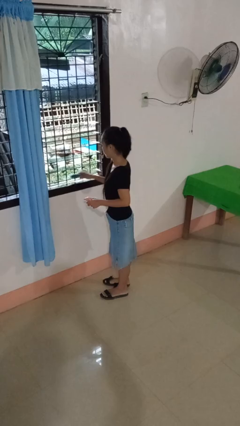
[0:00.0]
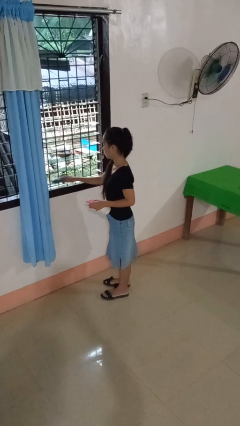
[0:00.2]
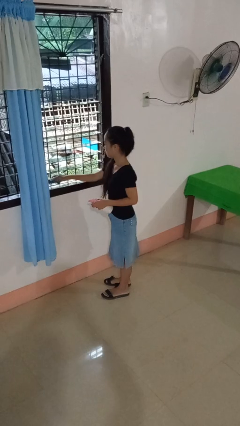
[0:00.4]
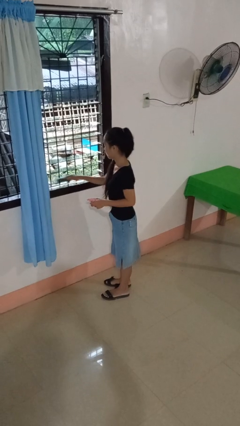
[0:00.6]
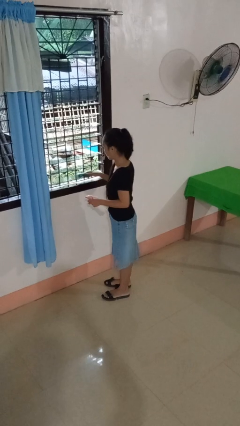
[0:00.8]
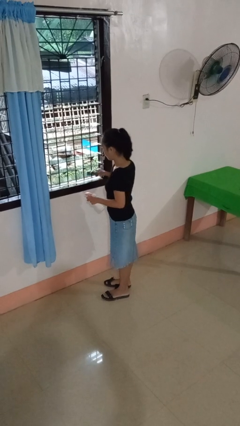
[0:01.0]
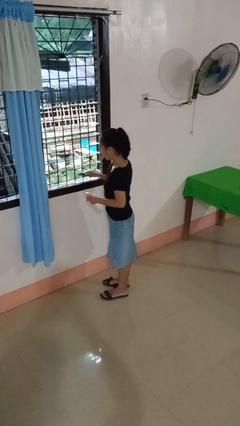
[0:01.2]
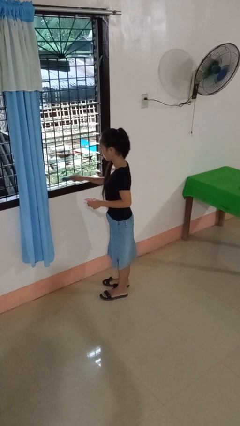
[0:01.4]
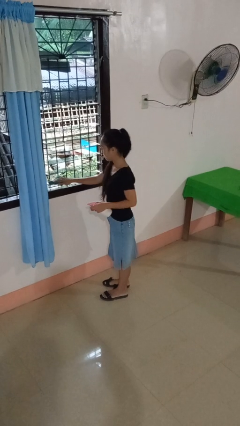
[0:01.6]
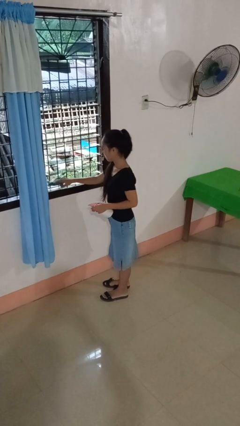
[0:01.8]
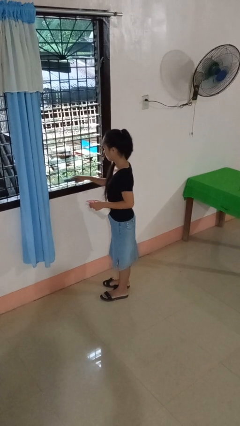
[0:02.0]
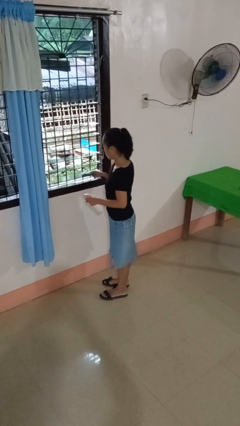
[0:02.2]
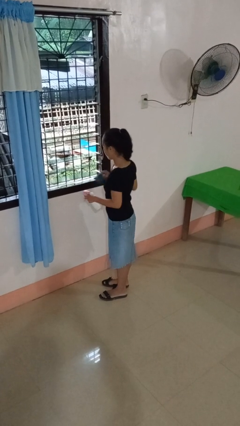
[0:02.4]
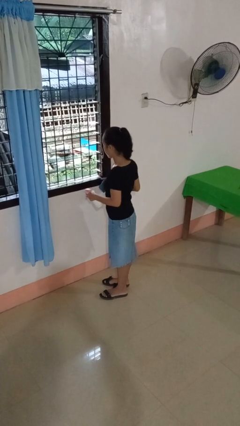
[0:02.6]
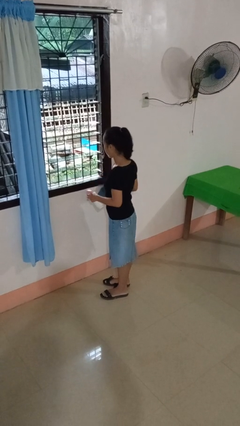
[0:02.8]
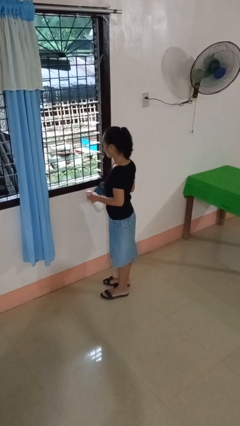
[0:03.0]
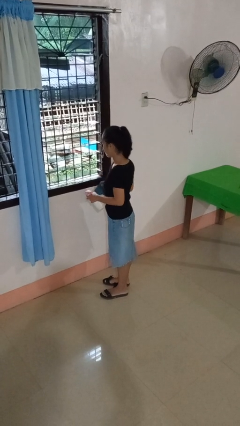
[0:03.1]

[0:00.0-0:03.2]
person washes window

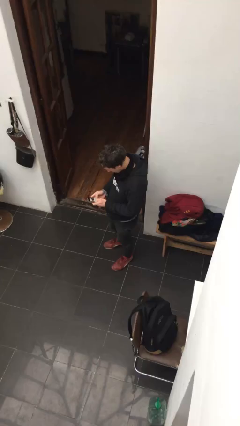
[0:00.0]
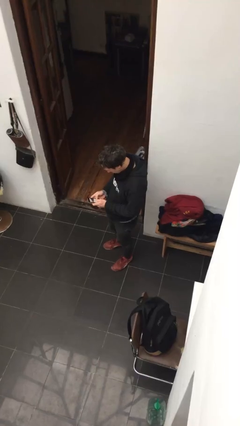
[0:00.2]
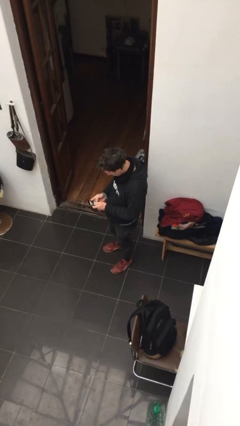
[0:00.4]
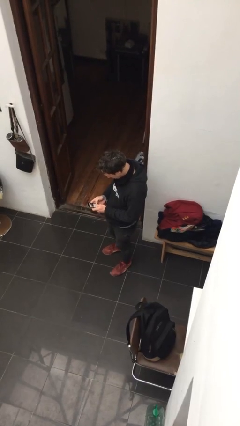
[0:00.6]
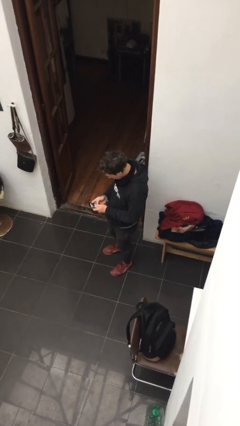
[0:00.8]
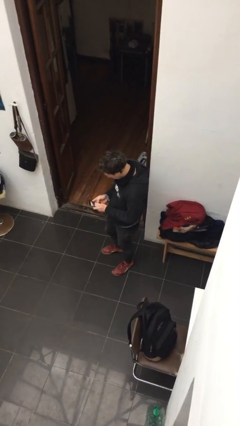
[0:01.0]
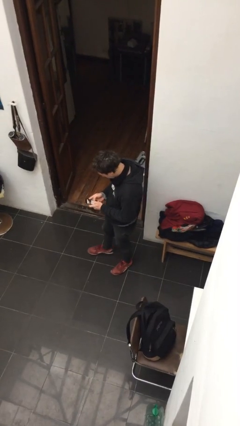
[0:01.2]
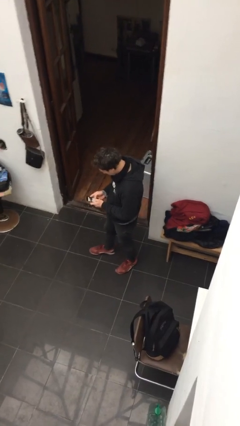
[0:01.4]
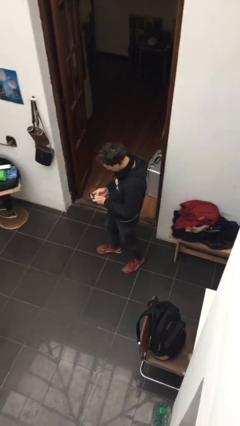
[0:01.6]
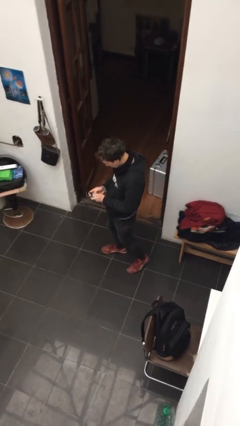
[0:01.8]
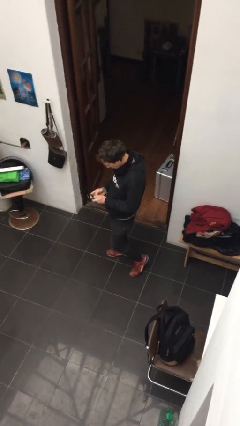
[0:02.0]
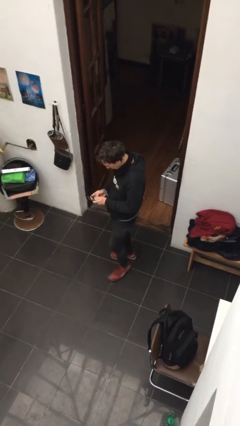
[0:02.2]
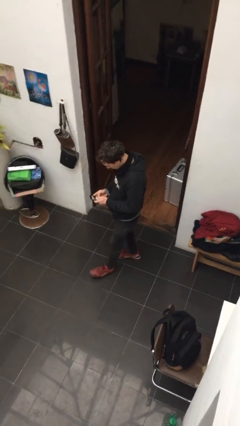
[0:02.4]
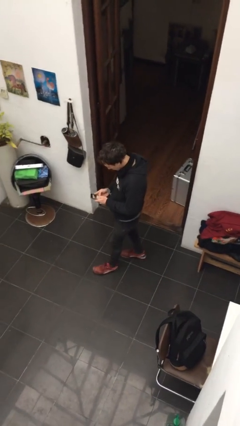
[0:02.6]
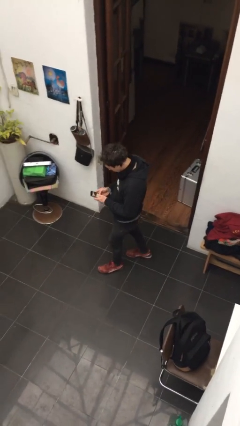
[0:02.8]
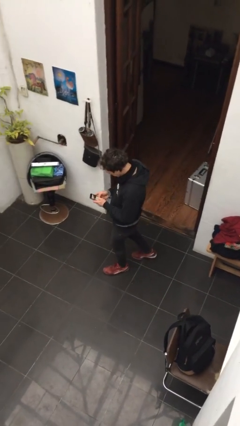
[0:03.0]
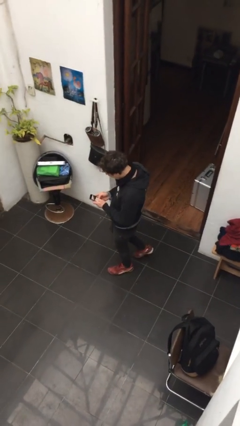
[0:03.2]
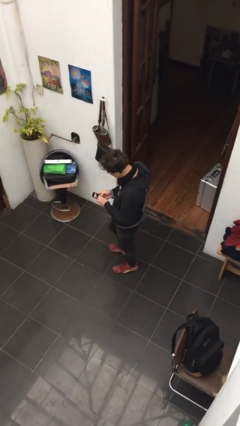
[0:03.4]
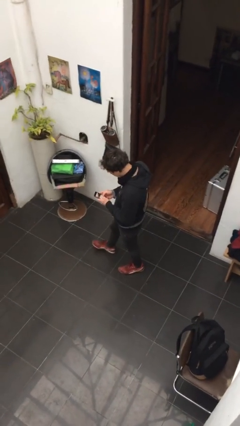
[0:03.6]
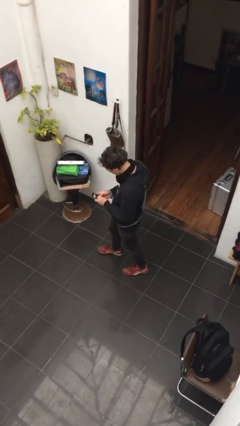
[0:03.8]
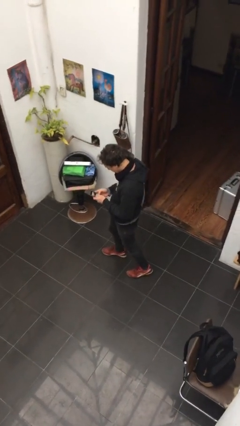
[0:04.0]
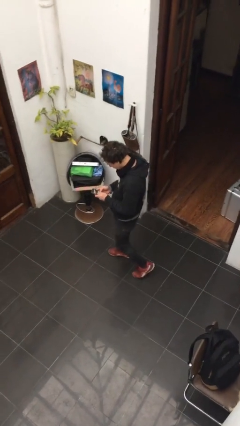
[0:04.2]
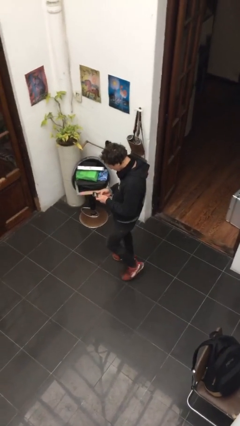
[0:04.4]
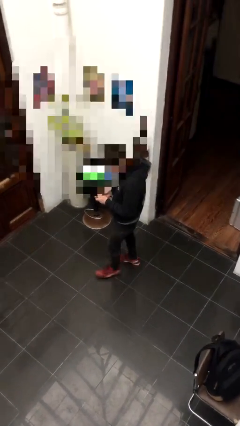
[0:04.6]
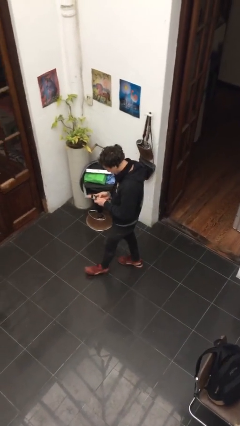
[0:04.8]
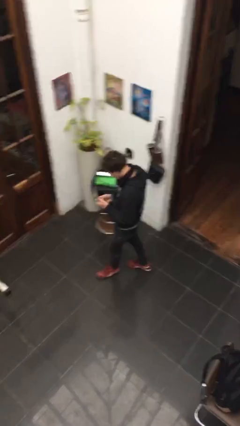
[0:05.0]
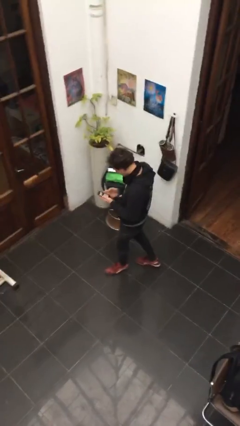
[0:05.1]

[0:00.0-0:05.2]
person texts on phone

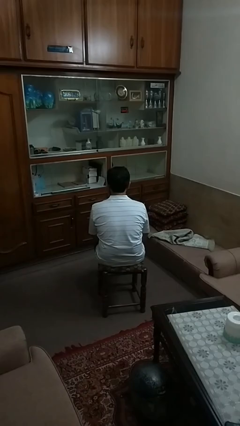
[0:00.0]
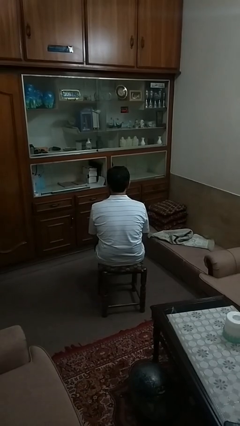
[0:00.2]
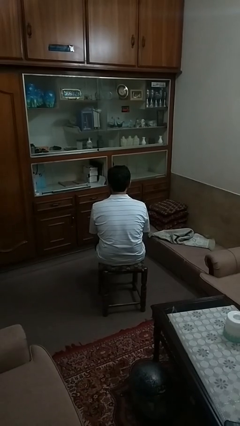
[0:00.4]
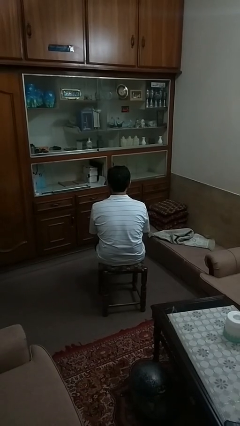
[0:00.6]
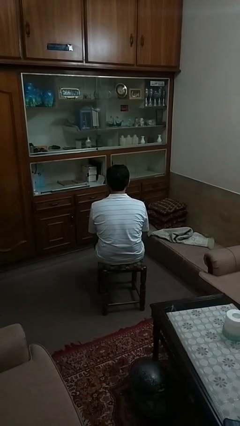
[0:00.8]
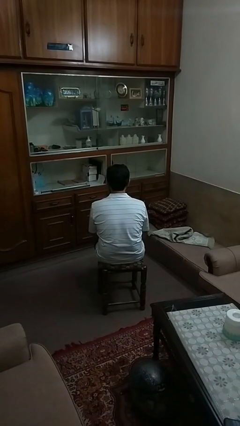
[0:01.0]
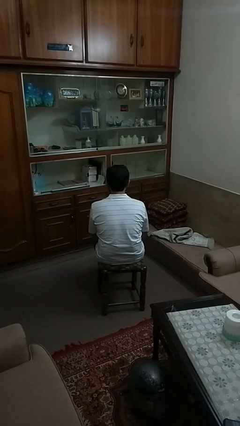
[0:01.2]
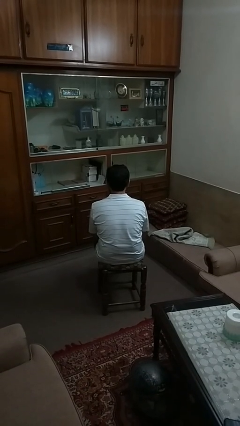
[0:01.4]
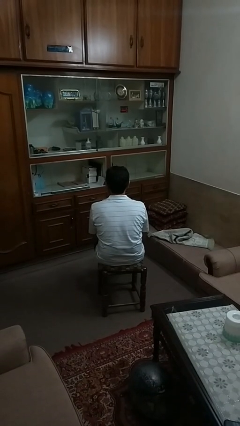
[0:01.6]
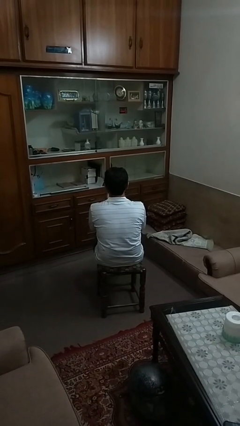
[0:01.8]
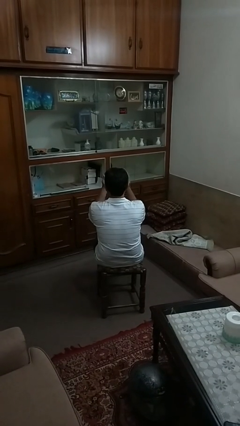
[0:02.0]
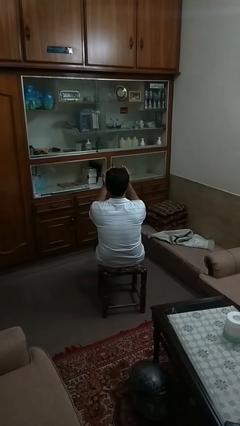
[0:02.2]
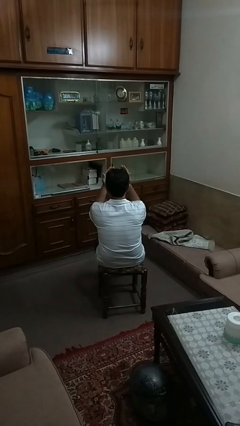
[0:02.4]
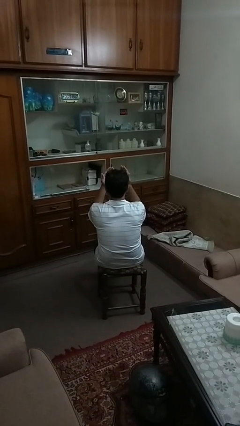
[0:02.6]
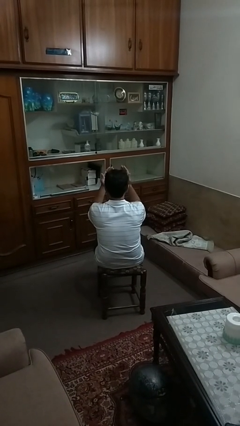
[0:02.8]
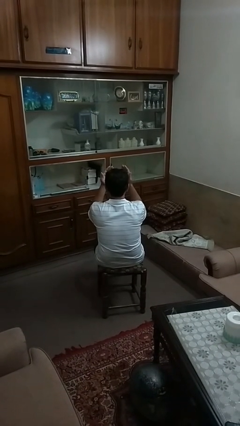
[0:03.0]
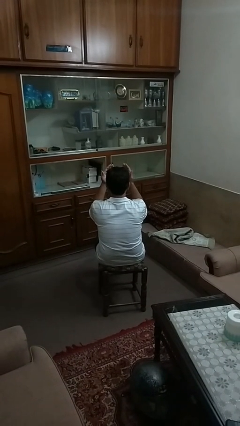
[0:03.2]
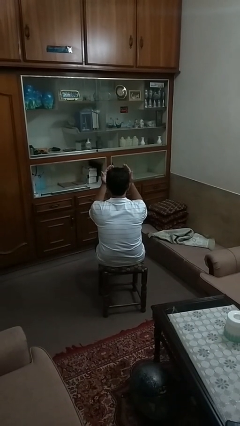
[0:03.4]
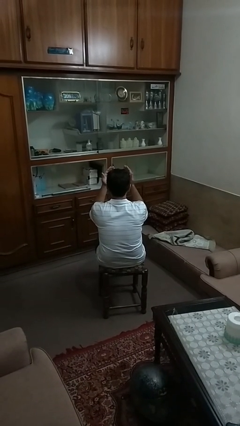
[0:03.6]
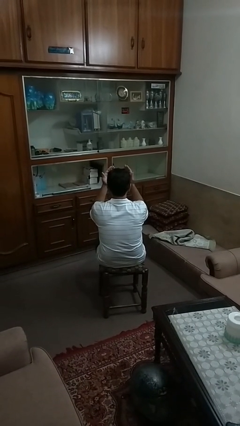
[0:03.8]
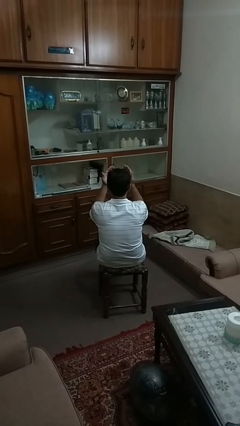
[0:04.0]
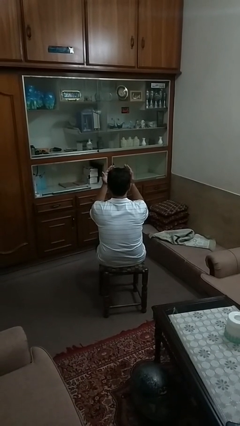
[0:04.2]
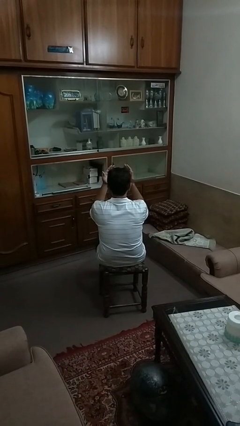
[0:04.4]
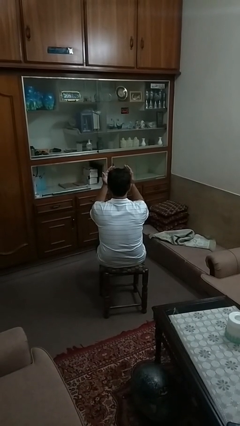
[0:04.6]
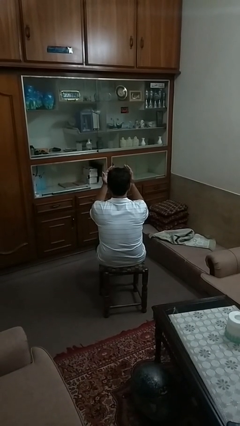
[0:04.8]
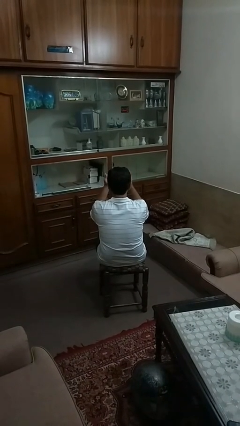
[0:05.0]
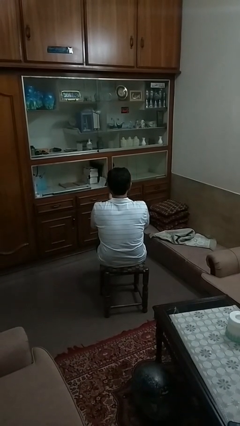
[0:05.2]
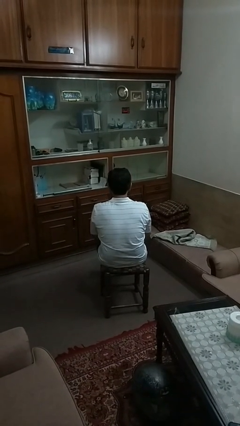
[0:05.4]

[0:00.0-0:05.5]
person prays

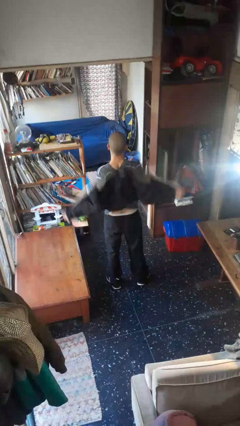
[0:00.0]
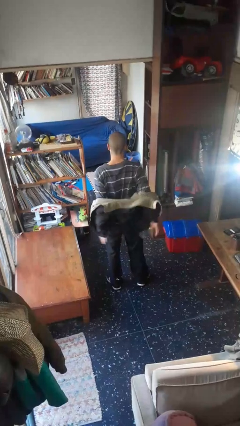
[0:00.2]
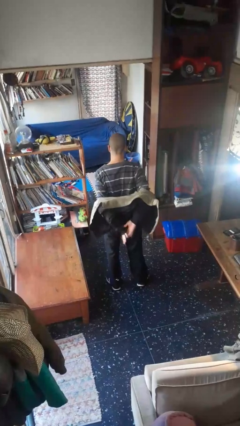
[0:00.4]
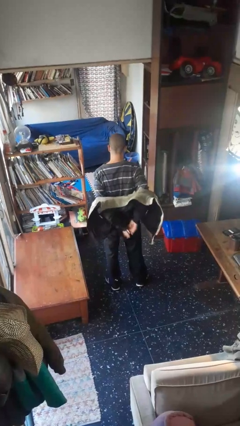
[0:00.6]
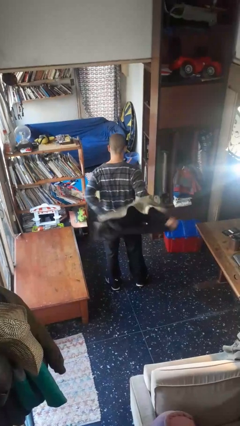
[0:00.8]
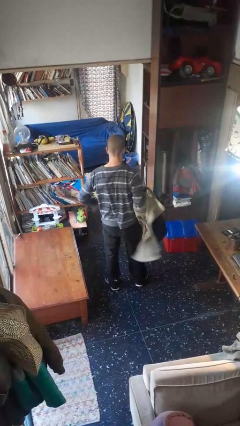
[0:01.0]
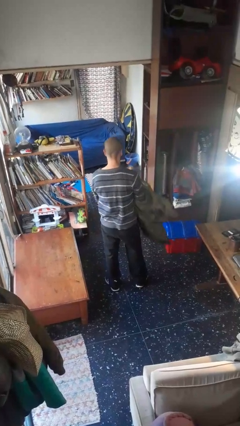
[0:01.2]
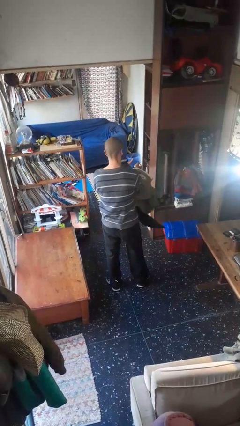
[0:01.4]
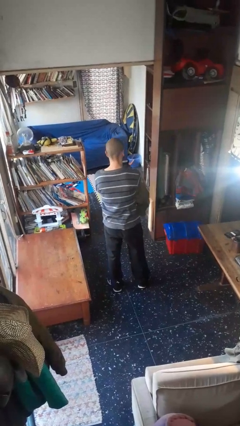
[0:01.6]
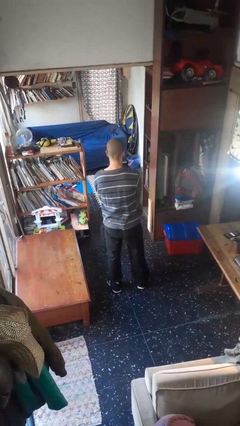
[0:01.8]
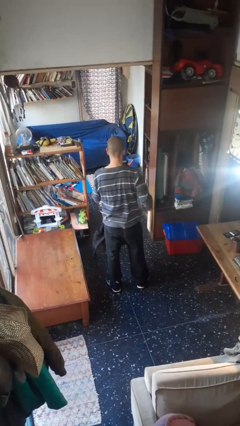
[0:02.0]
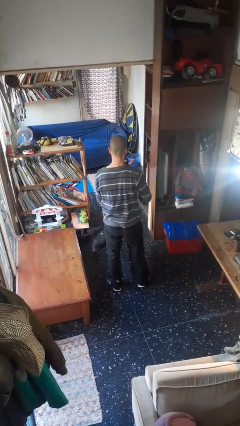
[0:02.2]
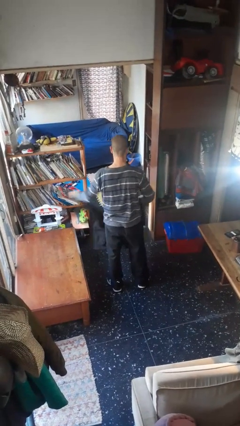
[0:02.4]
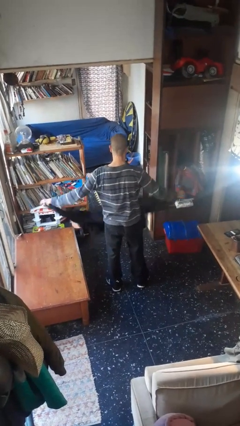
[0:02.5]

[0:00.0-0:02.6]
person takes off jacket

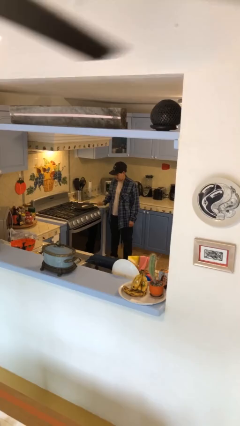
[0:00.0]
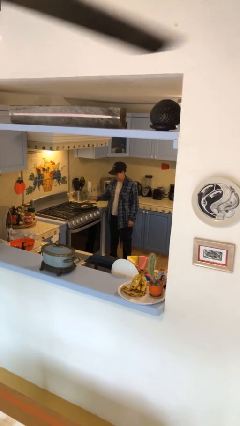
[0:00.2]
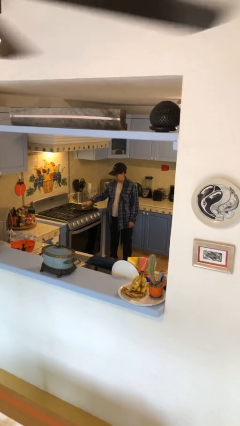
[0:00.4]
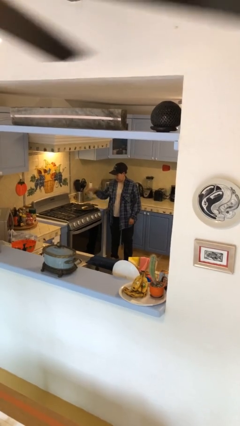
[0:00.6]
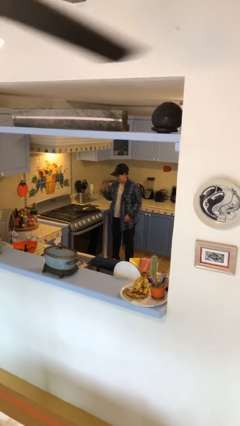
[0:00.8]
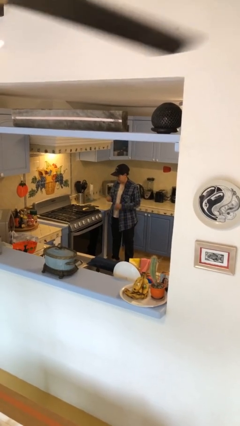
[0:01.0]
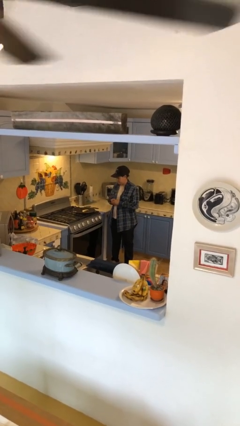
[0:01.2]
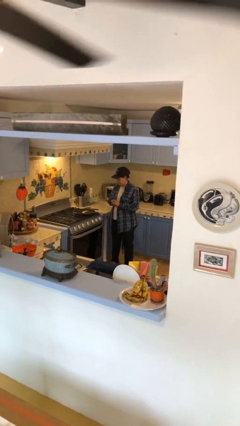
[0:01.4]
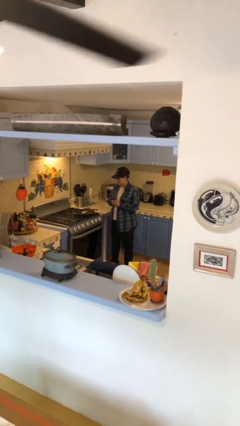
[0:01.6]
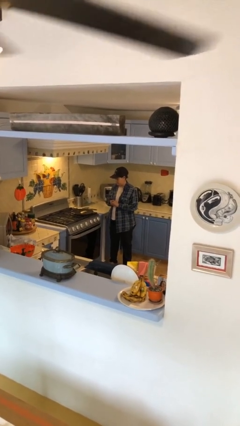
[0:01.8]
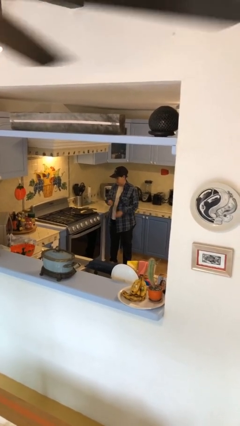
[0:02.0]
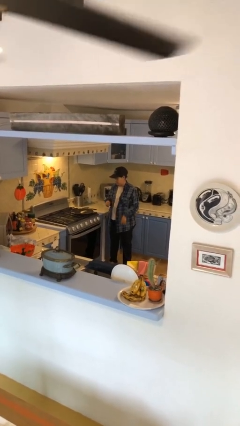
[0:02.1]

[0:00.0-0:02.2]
person burns hand
